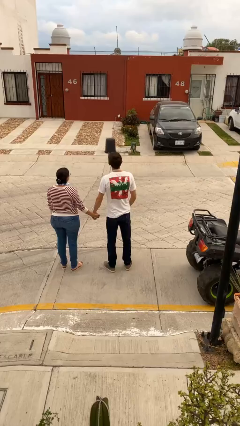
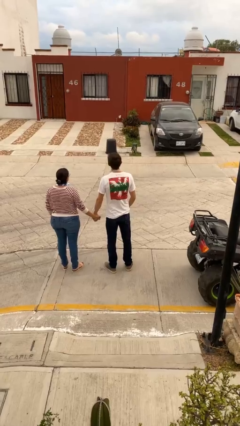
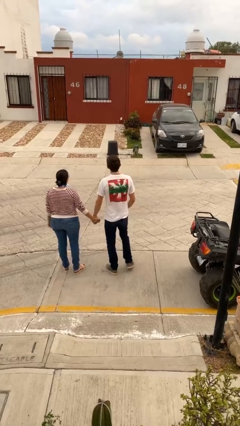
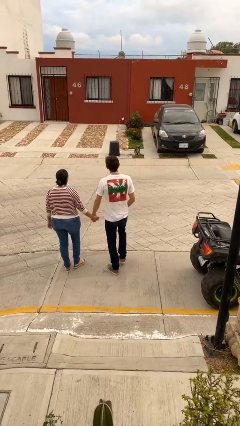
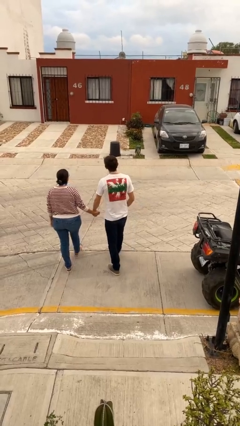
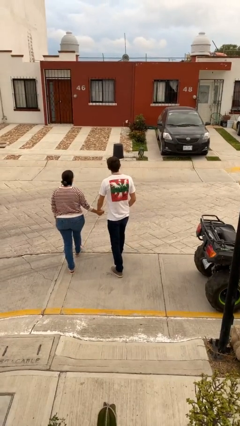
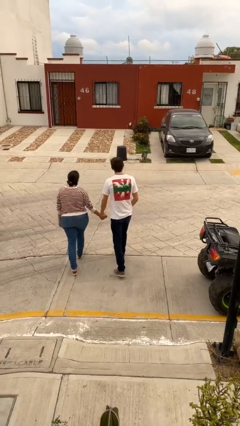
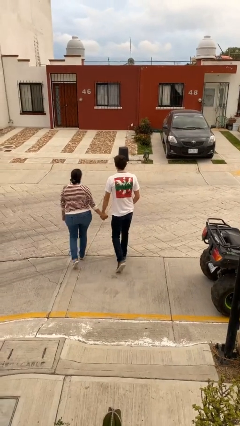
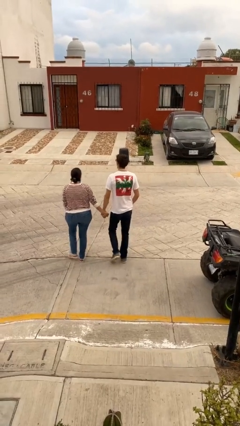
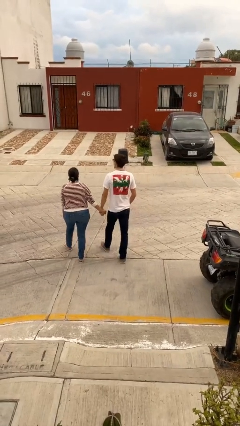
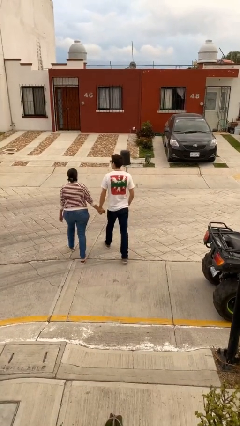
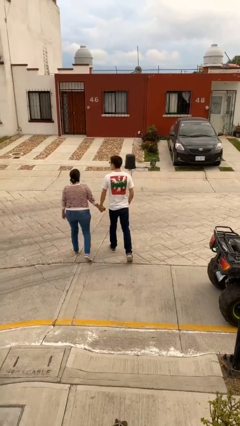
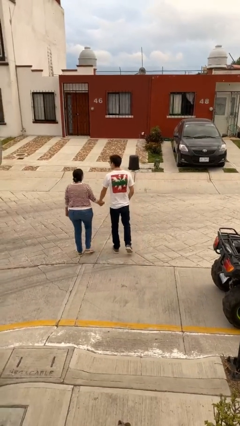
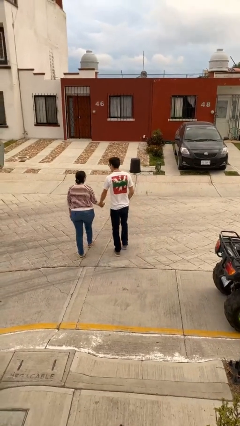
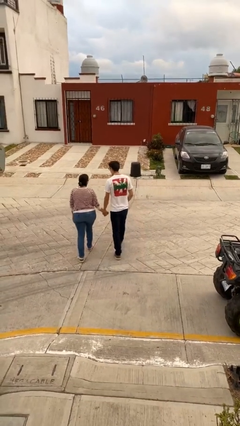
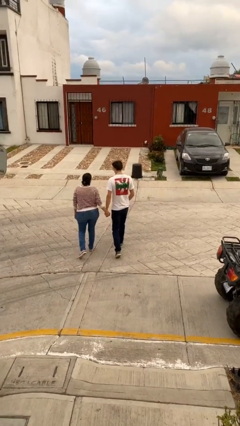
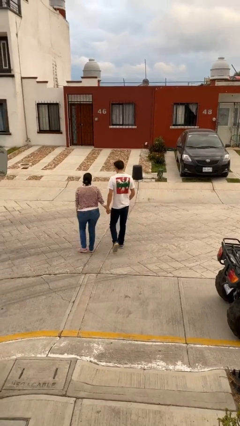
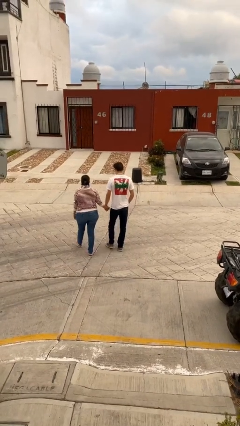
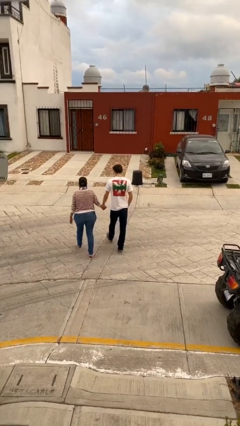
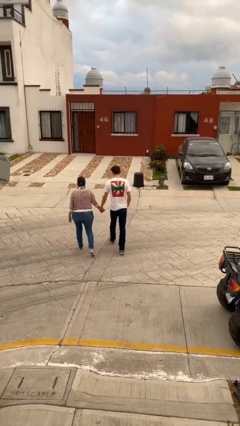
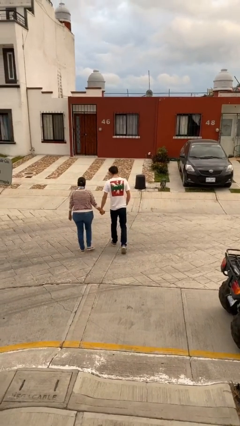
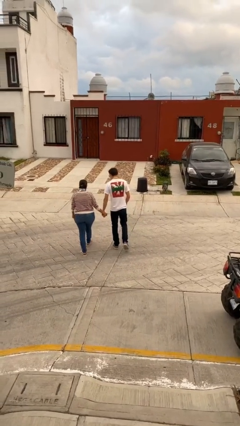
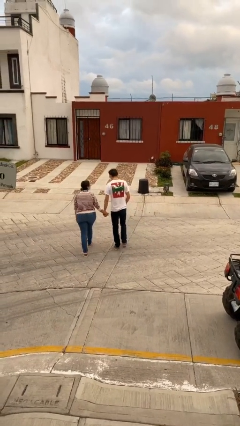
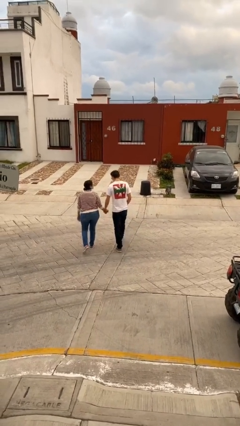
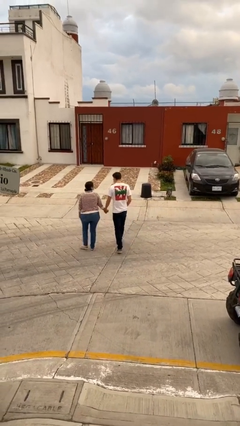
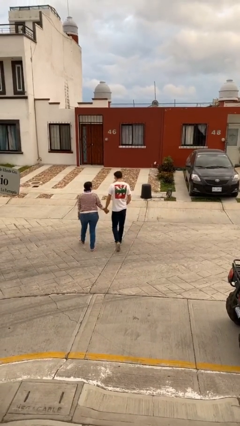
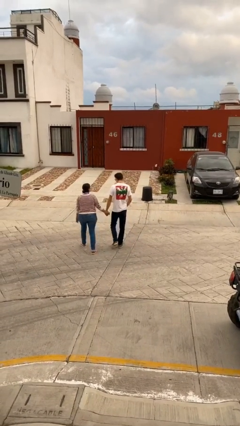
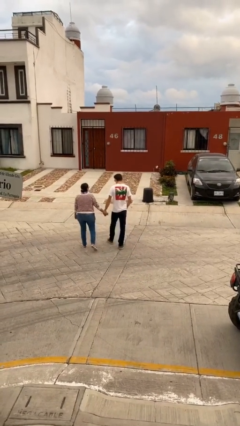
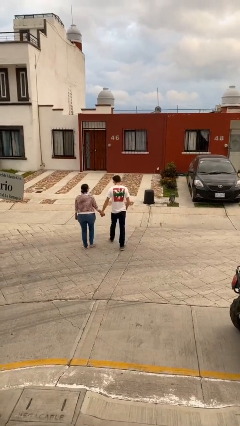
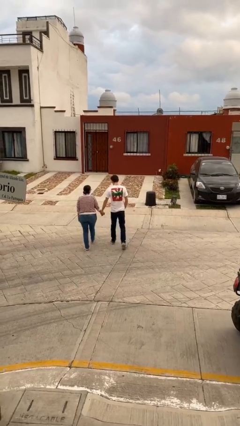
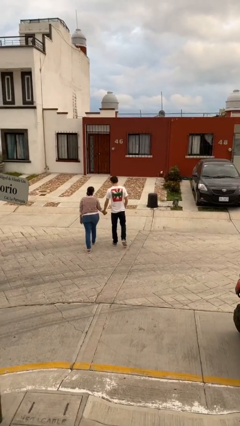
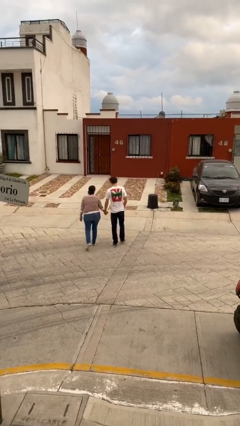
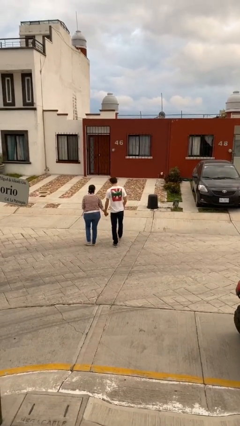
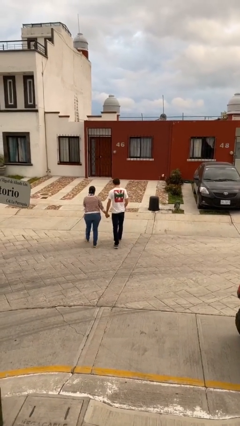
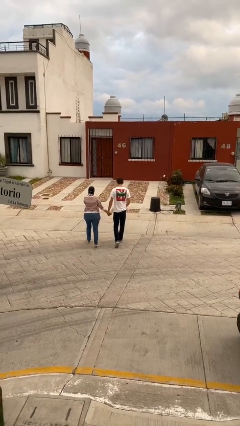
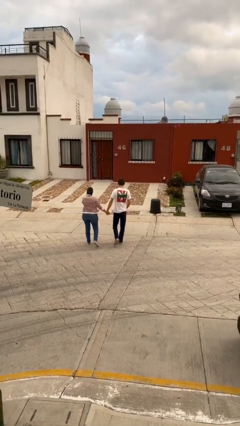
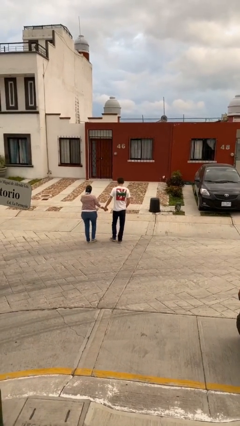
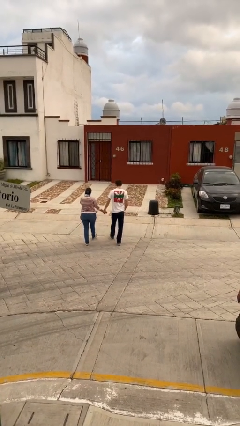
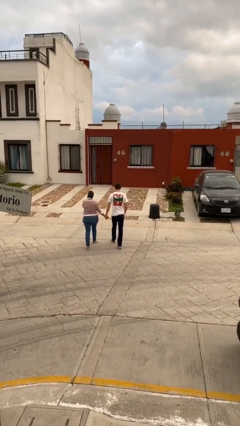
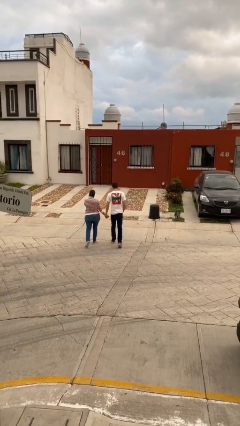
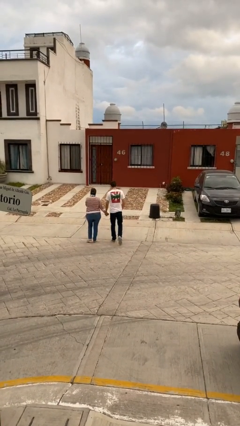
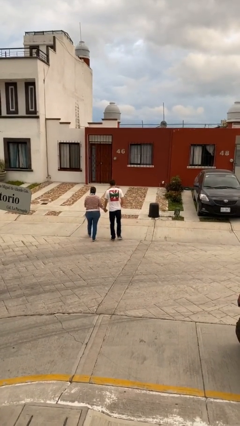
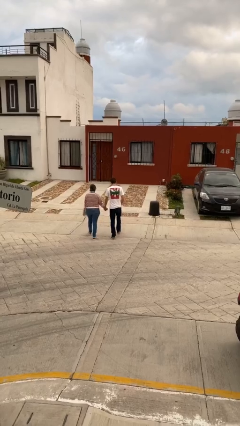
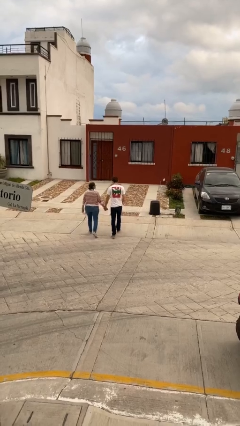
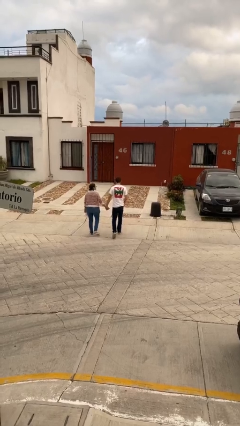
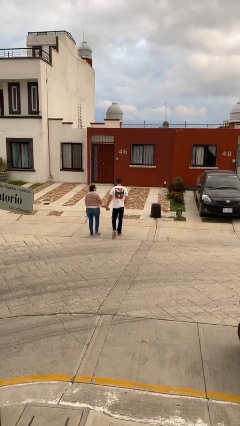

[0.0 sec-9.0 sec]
person holds hand

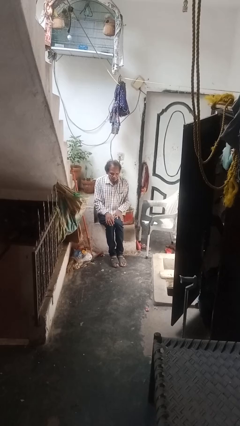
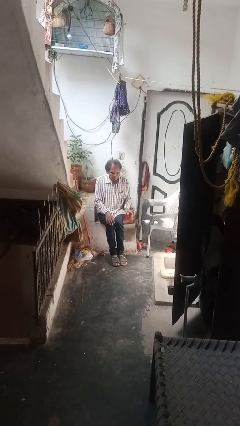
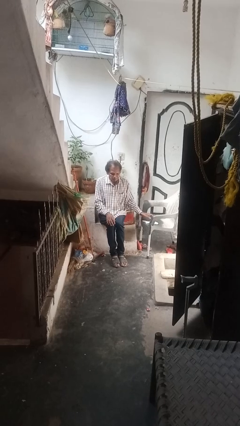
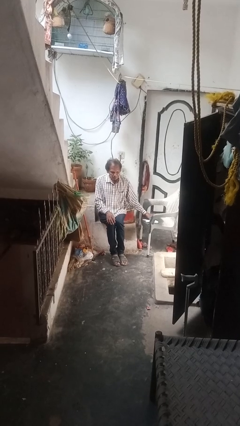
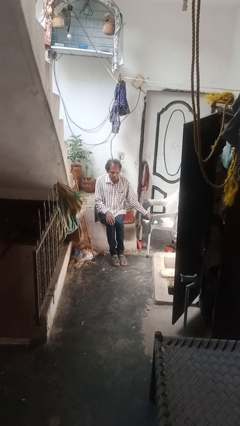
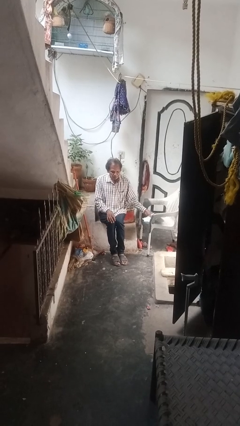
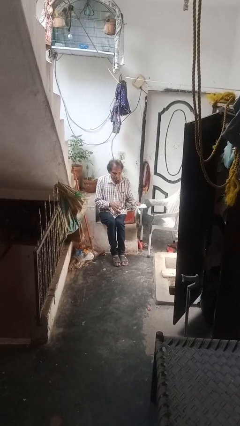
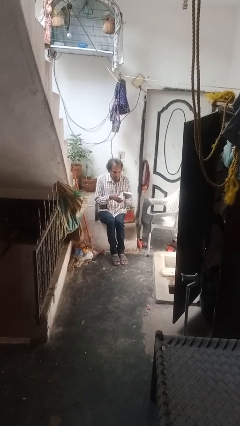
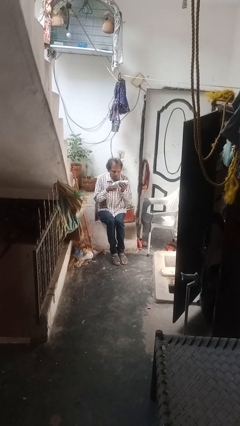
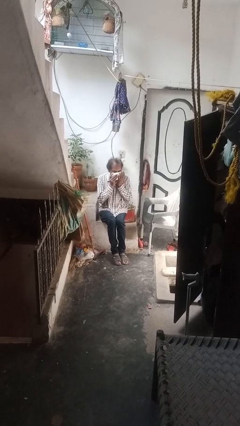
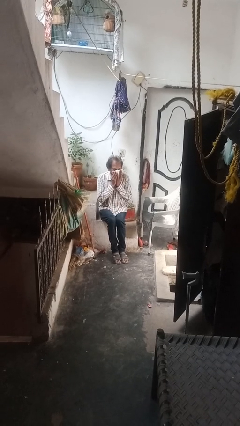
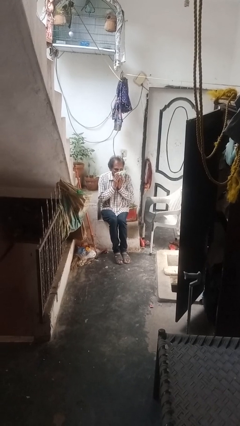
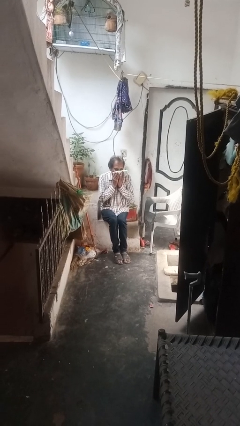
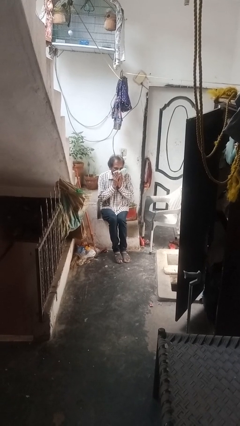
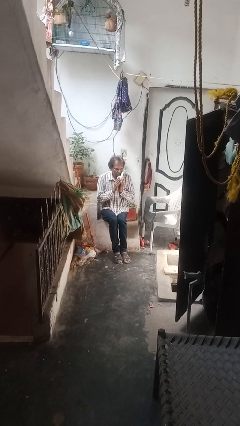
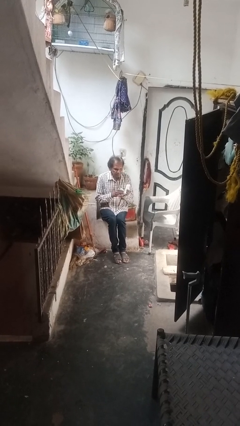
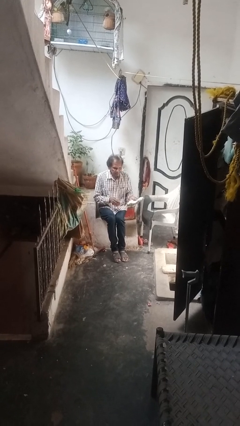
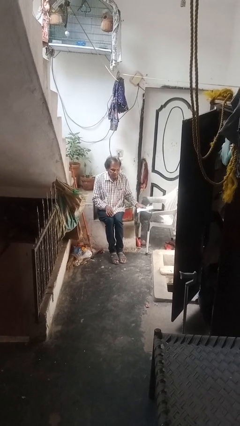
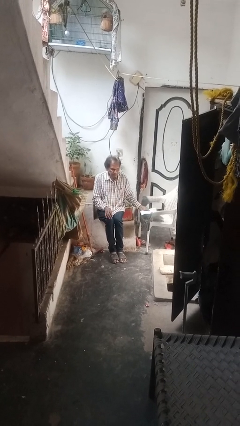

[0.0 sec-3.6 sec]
person wipes mouth with napkin

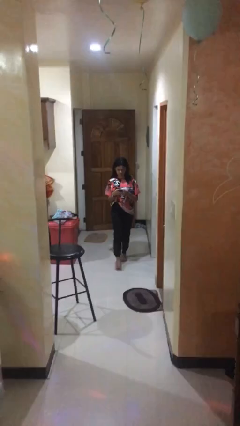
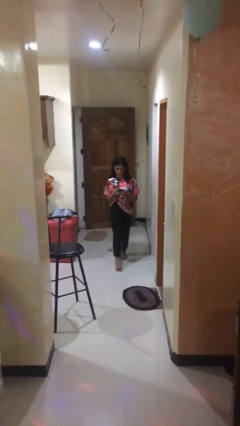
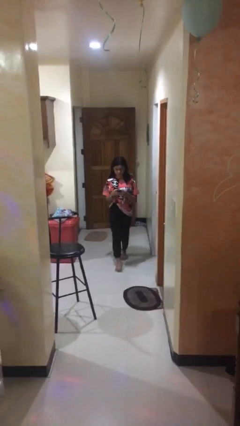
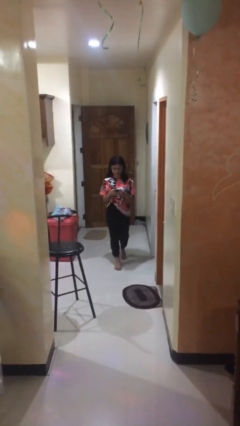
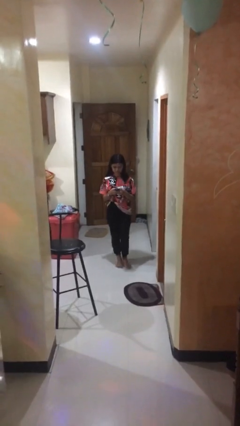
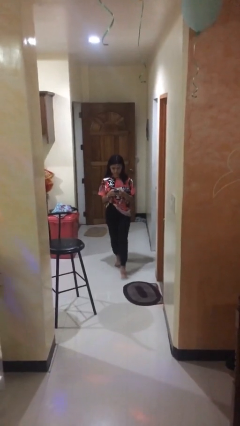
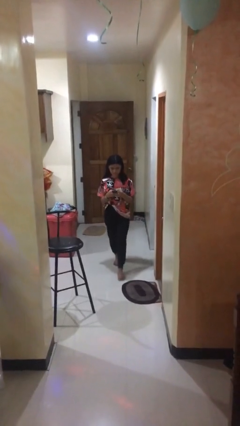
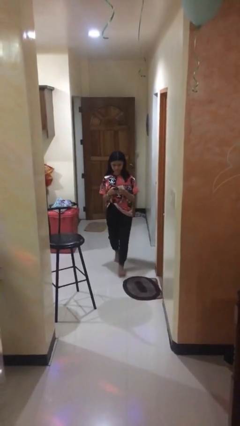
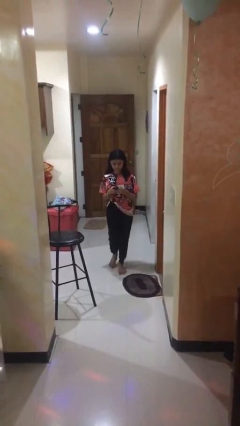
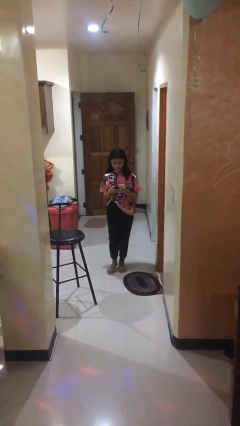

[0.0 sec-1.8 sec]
person texts on phone

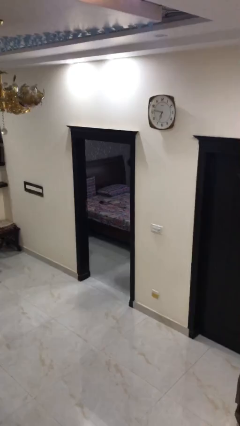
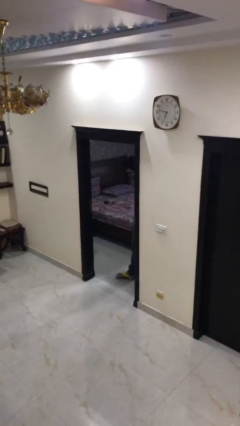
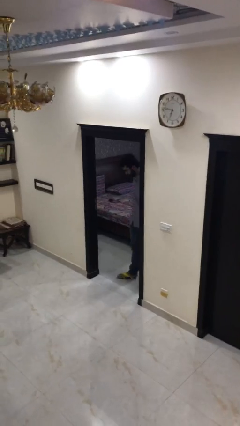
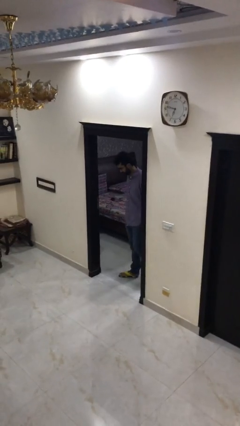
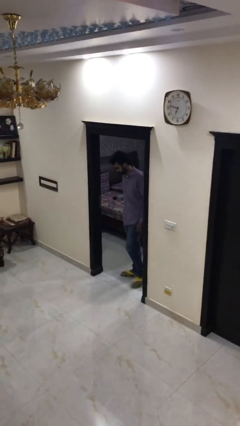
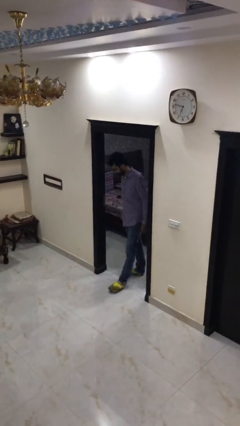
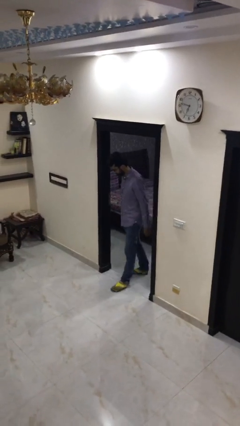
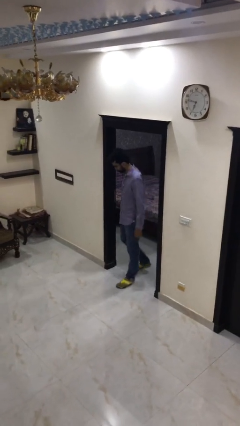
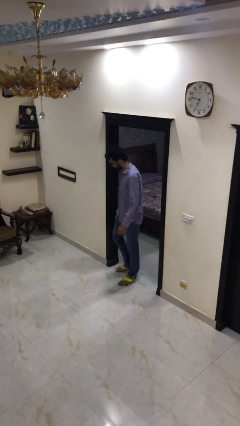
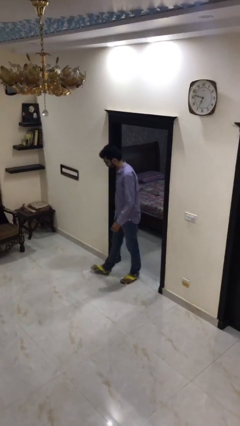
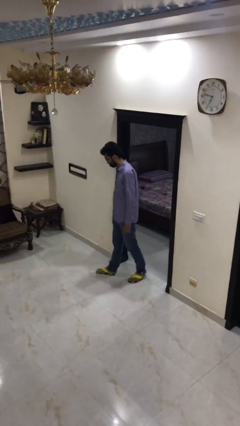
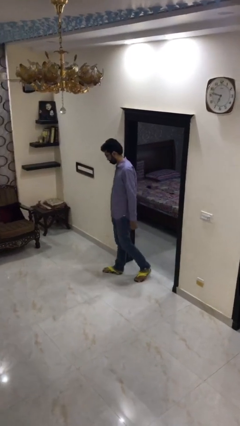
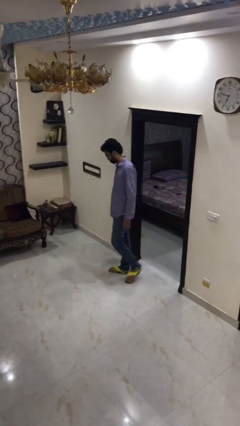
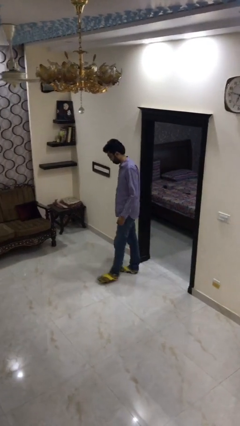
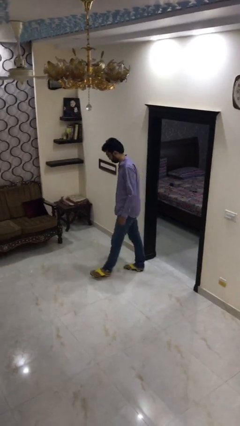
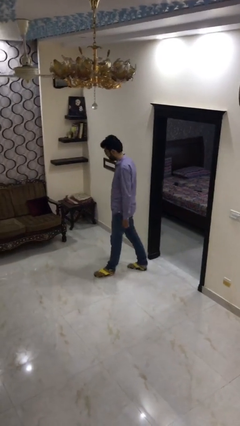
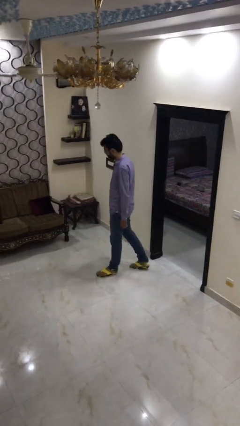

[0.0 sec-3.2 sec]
person enters scene through structure

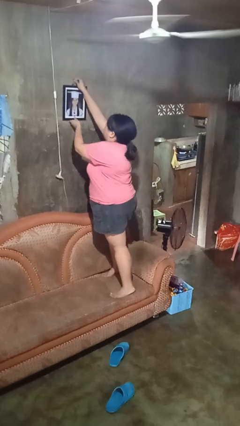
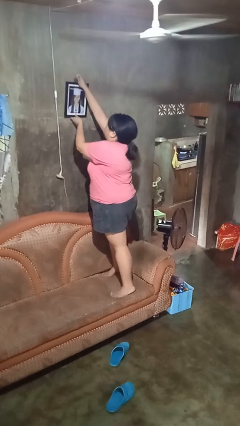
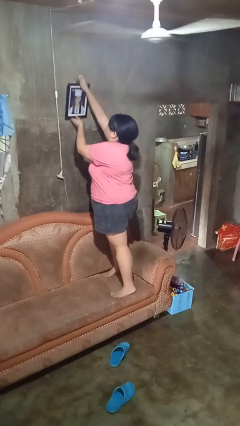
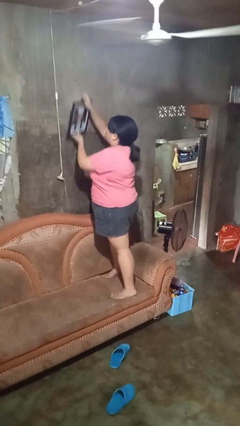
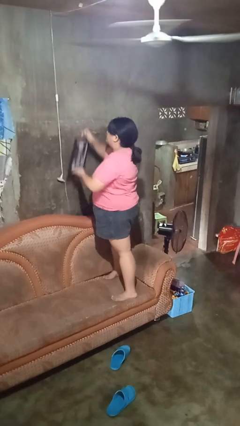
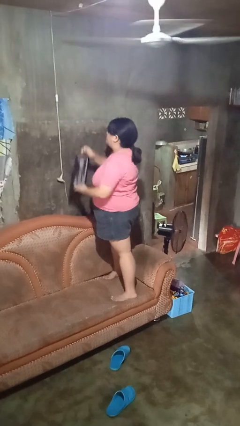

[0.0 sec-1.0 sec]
person takes down picture frame
